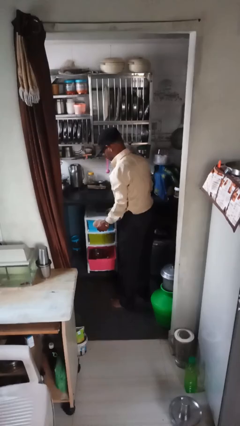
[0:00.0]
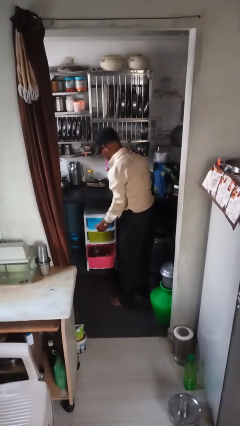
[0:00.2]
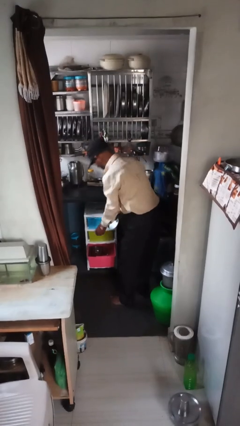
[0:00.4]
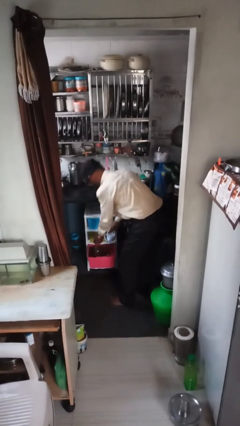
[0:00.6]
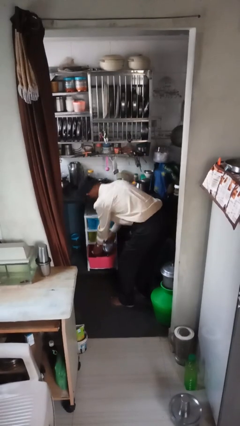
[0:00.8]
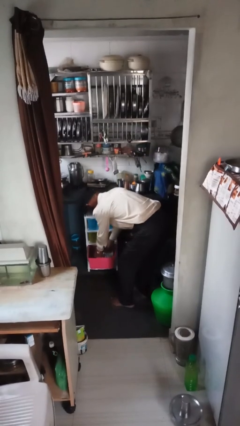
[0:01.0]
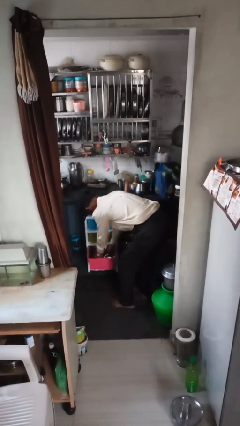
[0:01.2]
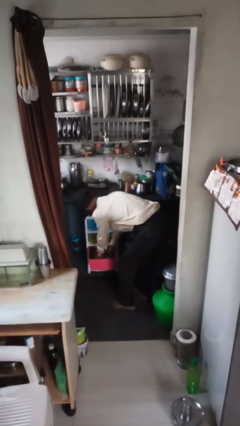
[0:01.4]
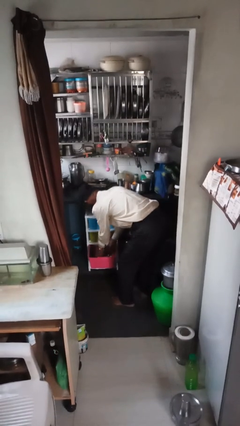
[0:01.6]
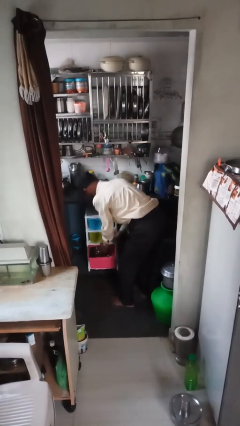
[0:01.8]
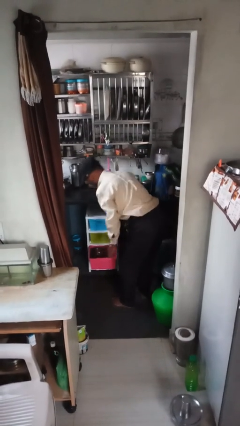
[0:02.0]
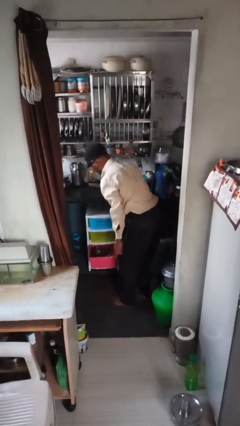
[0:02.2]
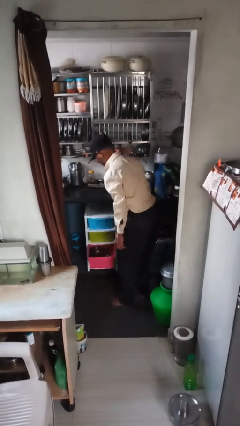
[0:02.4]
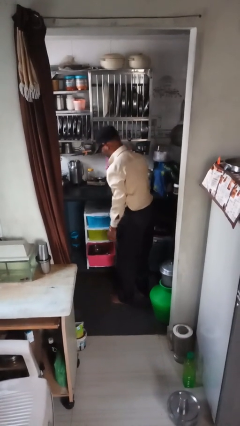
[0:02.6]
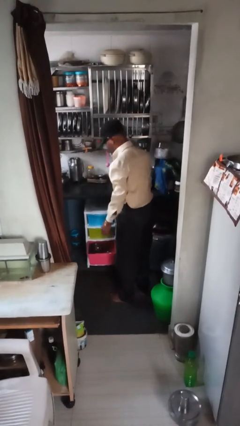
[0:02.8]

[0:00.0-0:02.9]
person puts object into kitchen drawer

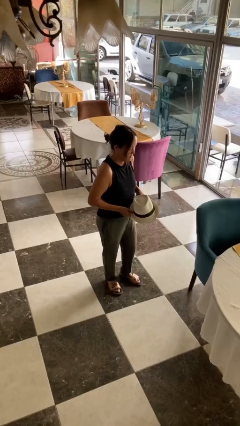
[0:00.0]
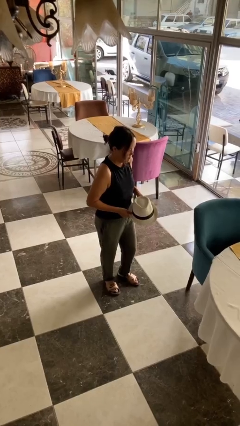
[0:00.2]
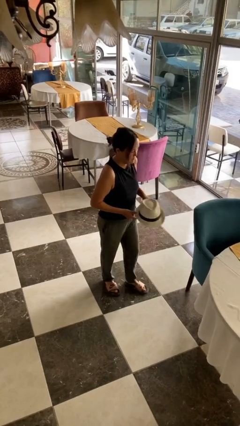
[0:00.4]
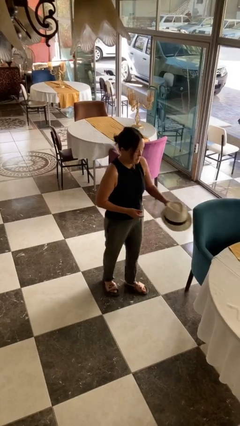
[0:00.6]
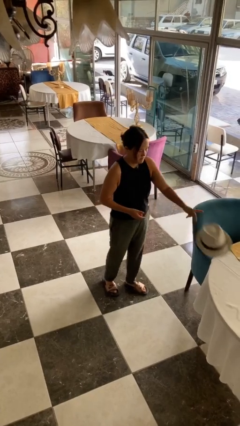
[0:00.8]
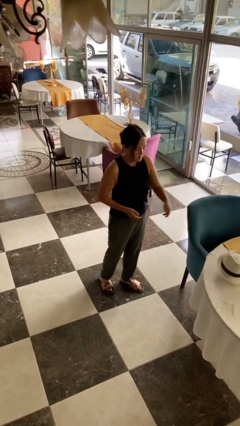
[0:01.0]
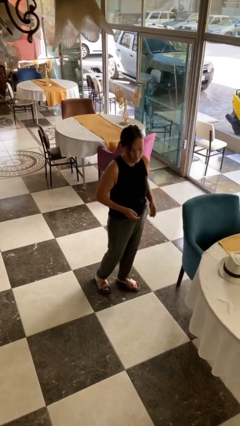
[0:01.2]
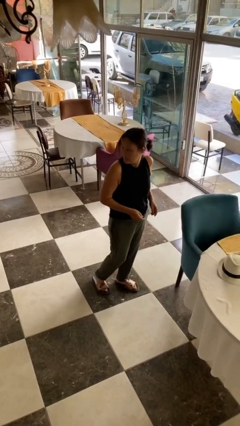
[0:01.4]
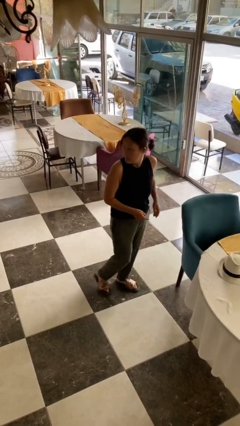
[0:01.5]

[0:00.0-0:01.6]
person throws object on table

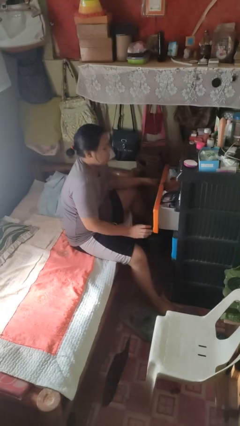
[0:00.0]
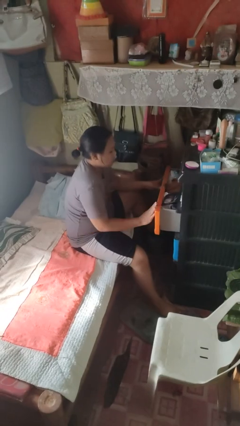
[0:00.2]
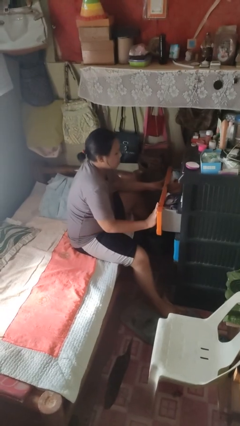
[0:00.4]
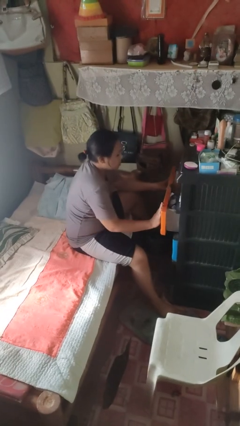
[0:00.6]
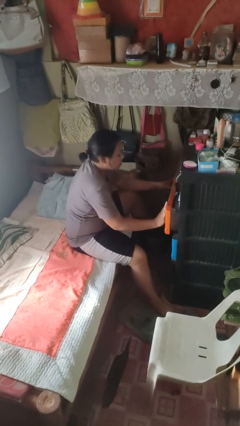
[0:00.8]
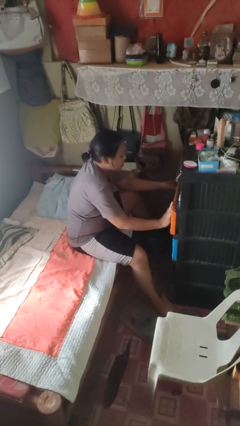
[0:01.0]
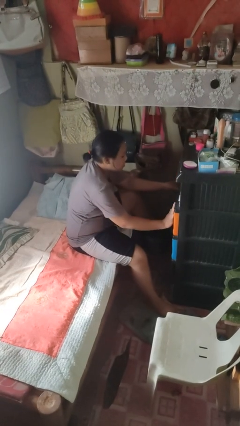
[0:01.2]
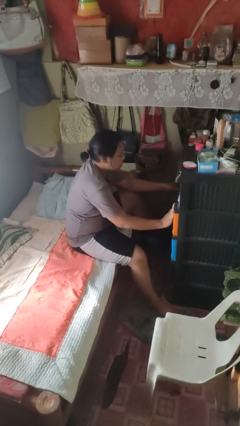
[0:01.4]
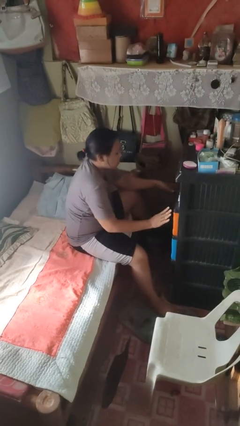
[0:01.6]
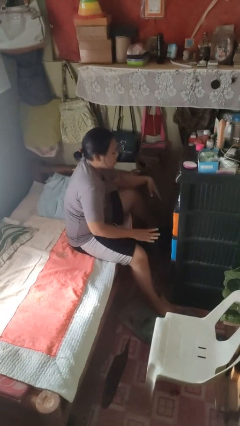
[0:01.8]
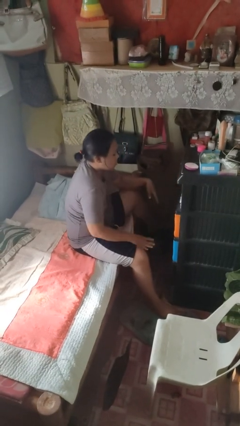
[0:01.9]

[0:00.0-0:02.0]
person closes dresser drawer

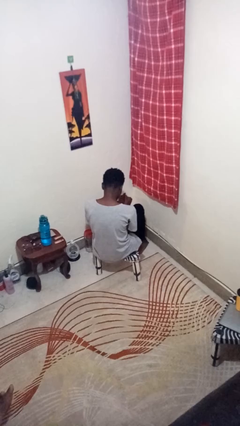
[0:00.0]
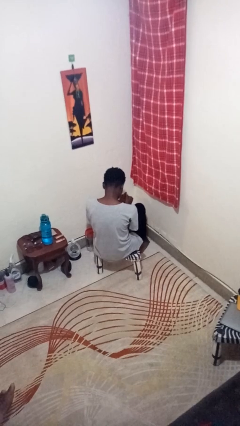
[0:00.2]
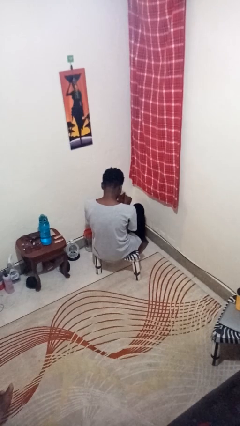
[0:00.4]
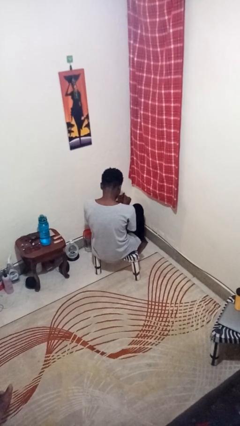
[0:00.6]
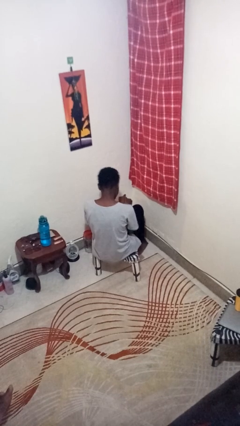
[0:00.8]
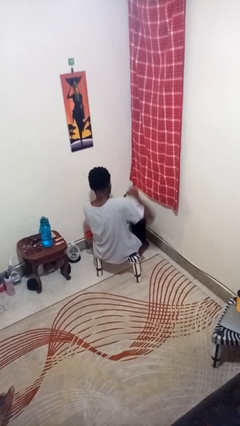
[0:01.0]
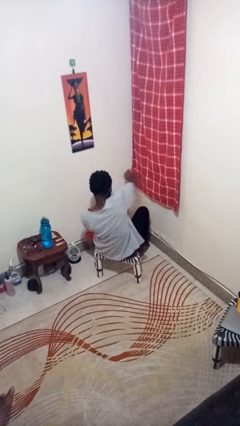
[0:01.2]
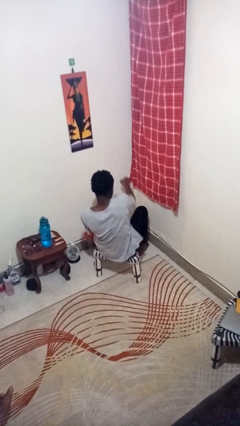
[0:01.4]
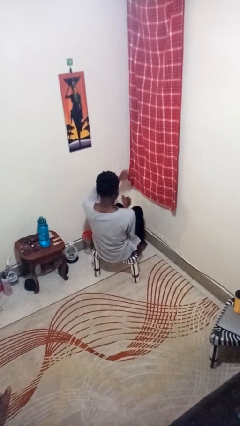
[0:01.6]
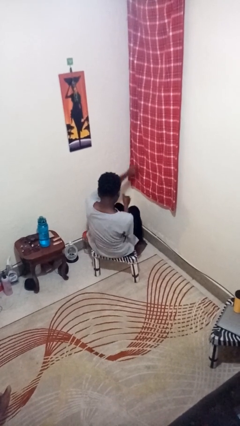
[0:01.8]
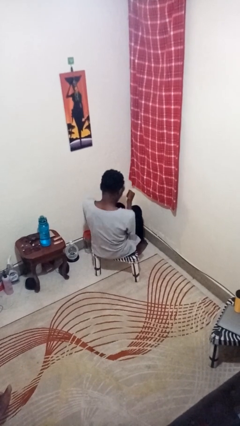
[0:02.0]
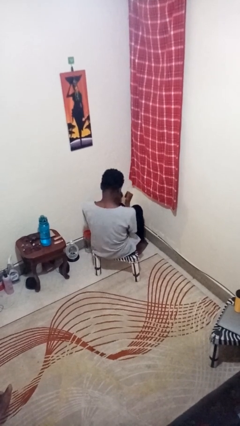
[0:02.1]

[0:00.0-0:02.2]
person punches

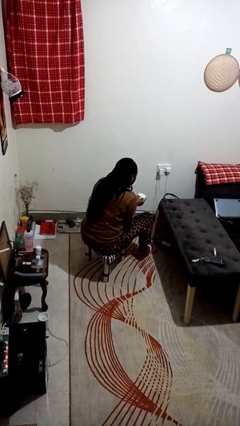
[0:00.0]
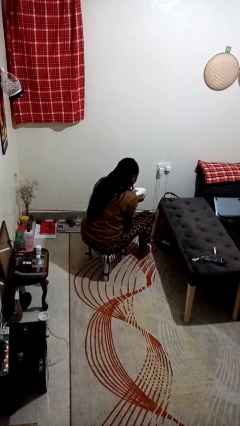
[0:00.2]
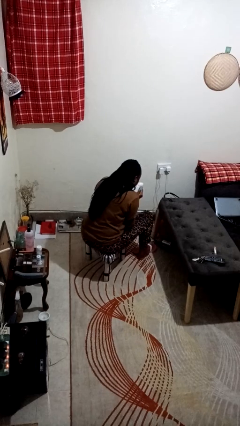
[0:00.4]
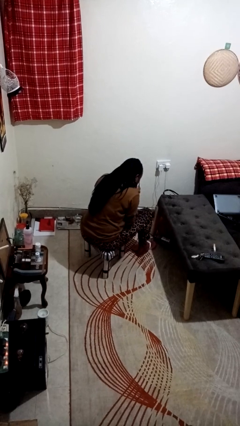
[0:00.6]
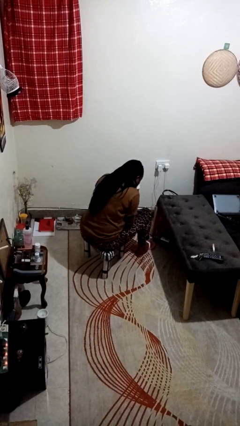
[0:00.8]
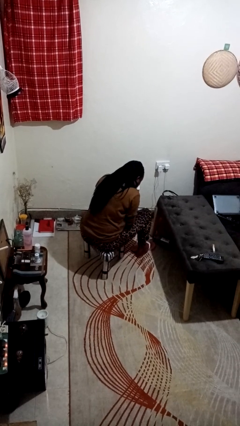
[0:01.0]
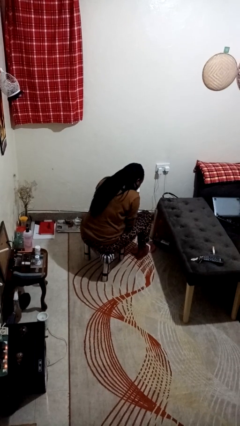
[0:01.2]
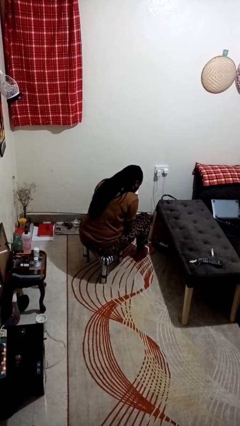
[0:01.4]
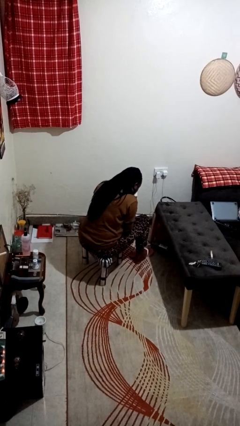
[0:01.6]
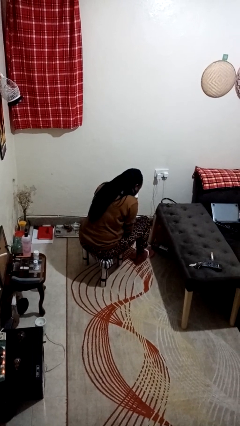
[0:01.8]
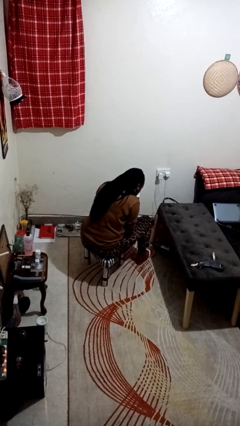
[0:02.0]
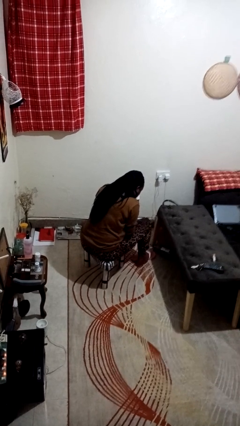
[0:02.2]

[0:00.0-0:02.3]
person blows nose

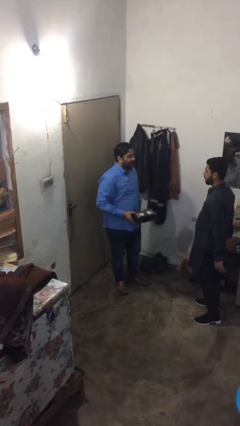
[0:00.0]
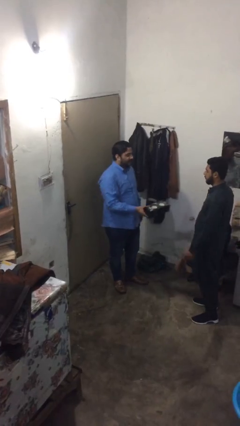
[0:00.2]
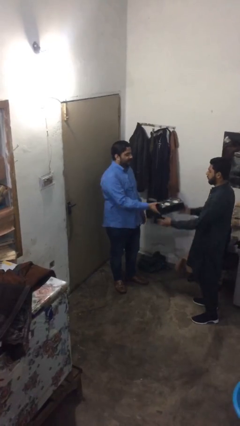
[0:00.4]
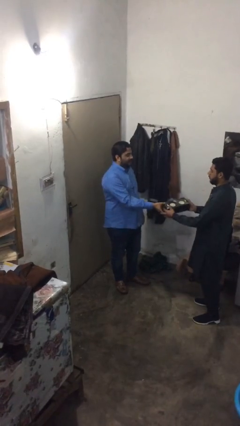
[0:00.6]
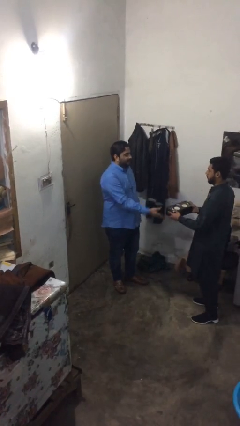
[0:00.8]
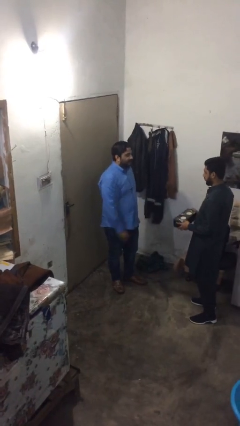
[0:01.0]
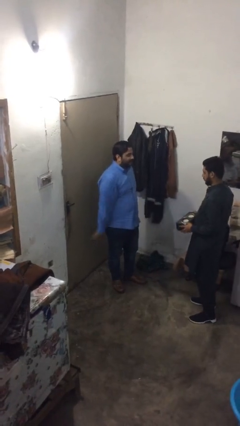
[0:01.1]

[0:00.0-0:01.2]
person transfers object to person

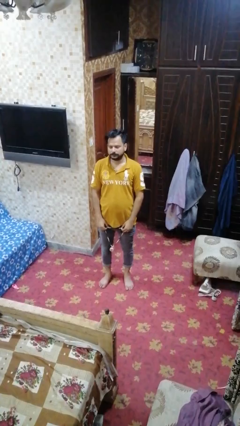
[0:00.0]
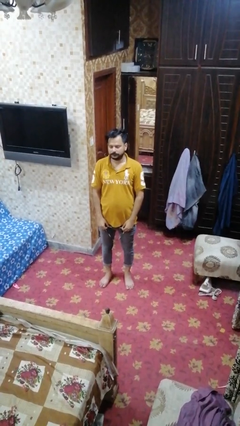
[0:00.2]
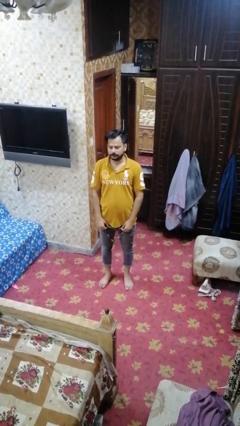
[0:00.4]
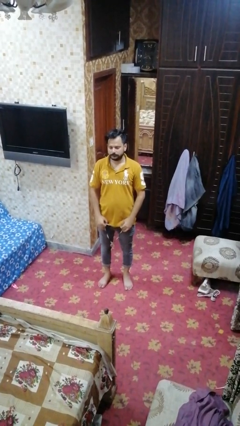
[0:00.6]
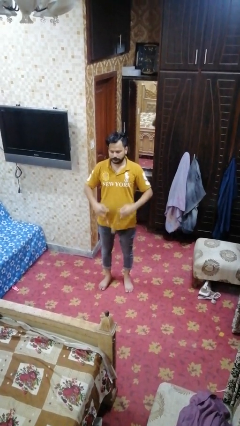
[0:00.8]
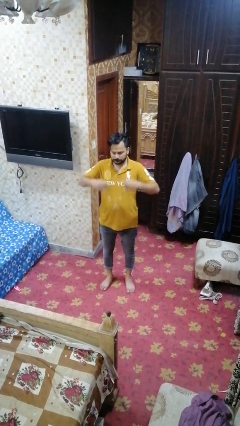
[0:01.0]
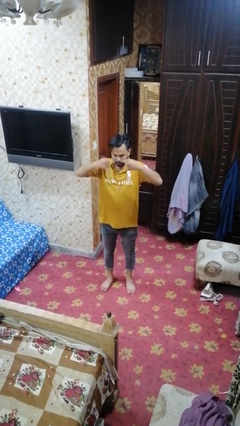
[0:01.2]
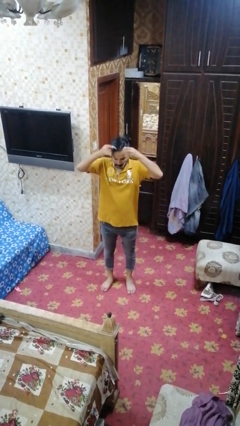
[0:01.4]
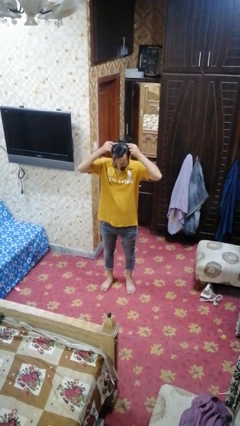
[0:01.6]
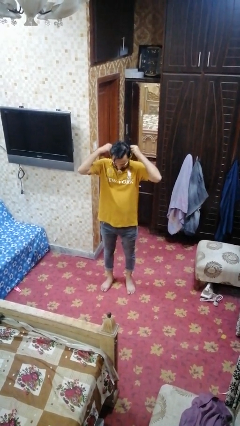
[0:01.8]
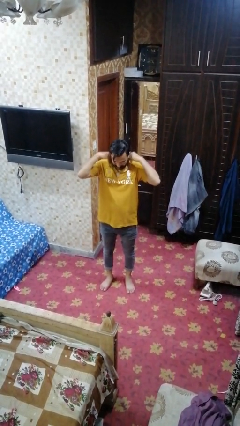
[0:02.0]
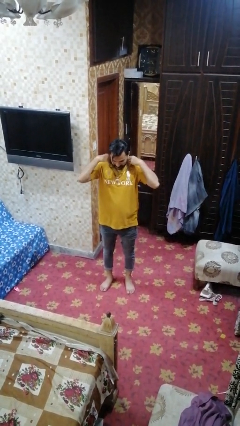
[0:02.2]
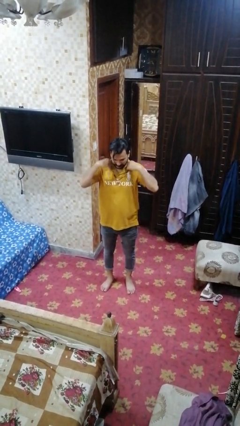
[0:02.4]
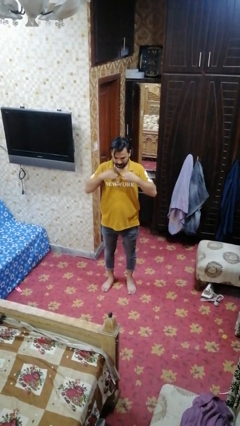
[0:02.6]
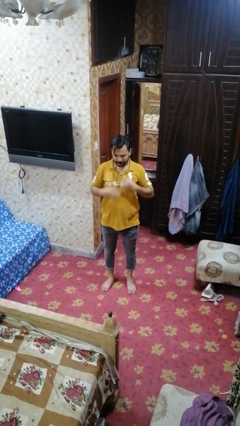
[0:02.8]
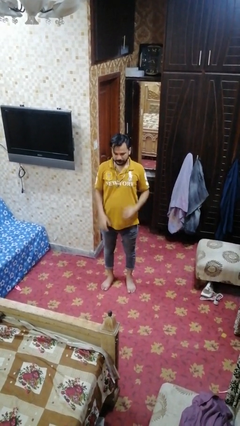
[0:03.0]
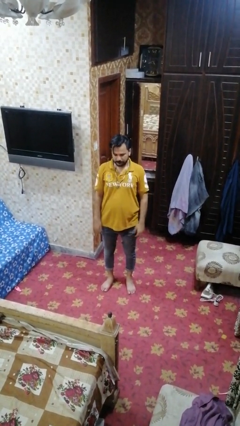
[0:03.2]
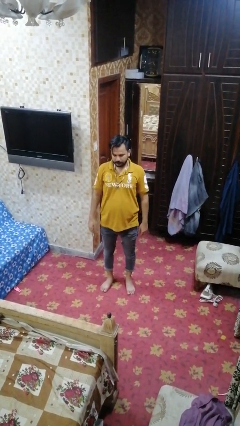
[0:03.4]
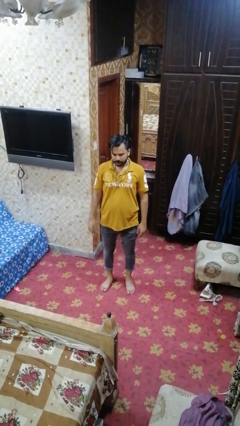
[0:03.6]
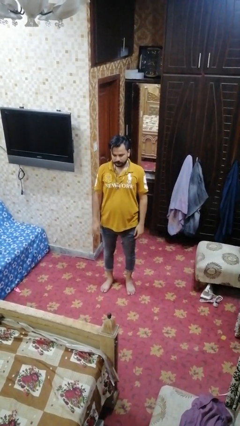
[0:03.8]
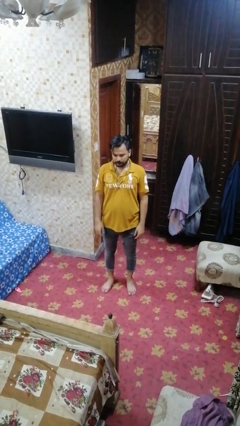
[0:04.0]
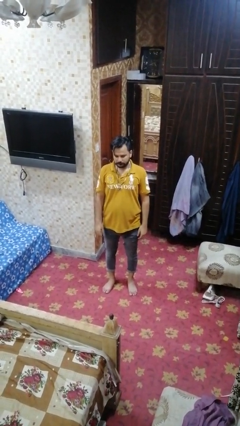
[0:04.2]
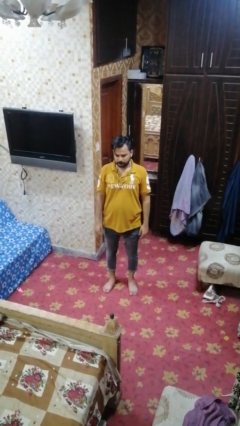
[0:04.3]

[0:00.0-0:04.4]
person puts on necklace

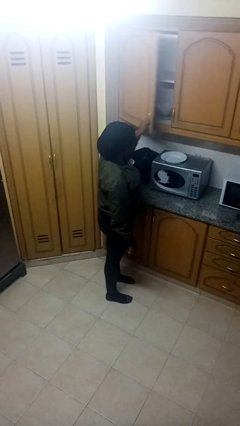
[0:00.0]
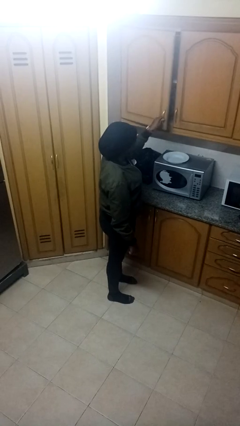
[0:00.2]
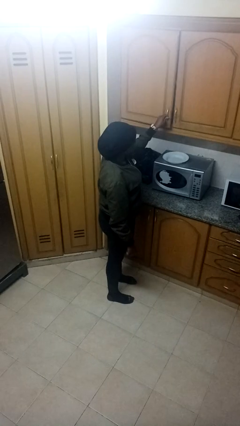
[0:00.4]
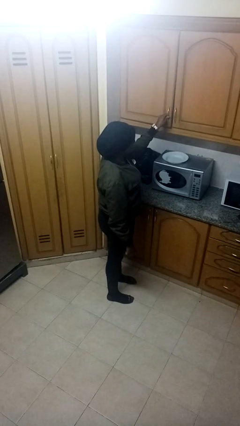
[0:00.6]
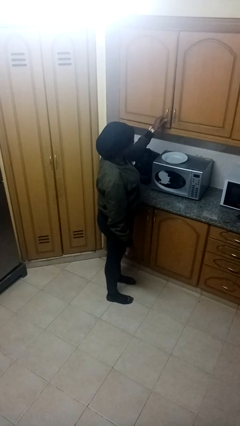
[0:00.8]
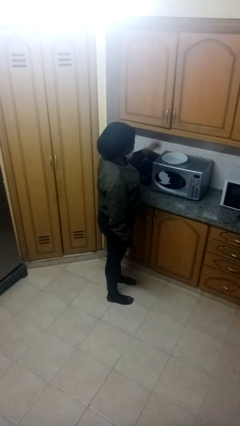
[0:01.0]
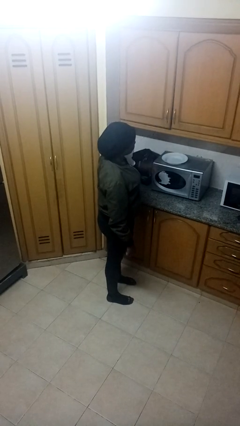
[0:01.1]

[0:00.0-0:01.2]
person closes cabinet
